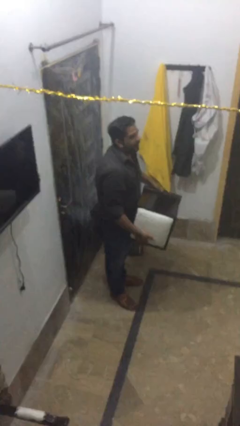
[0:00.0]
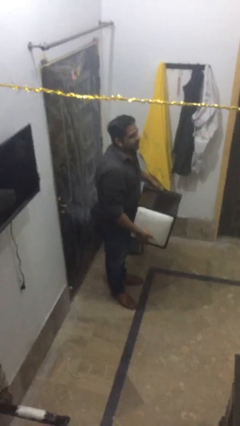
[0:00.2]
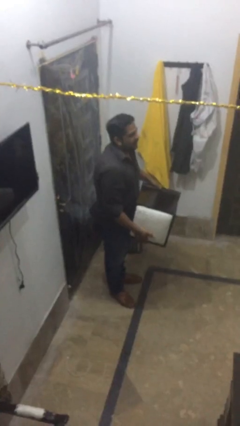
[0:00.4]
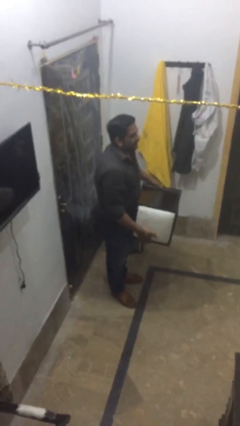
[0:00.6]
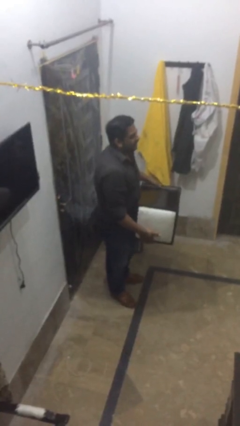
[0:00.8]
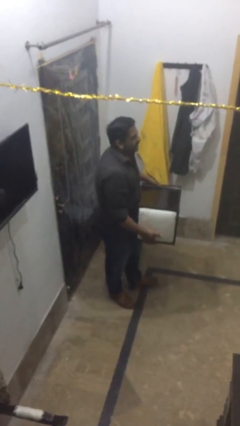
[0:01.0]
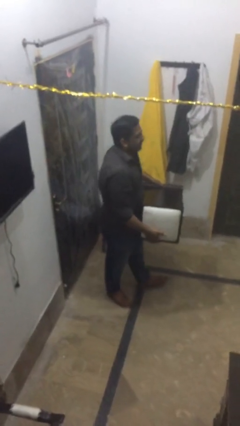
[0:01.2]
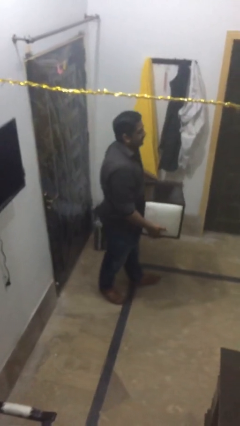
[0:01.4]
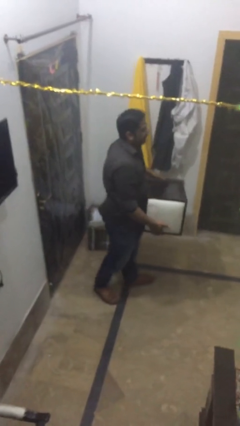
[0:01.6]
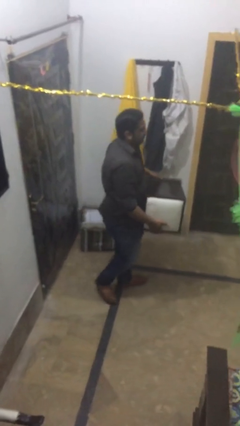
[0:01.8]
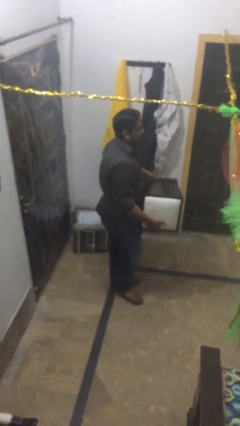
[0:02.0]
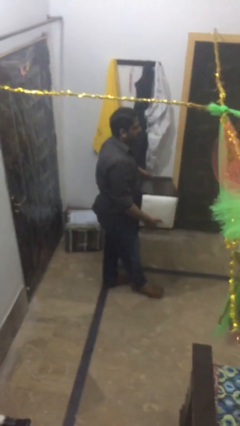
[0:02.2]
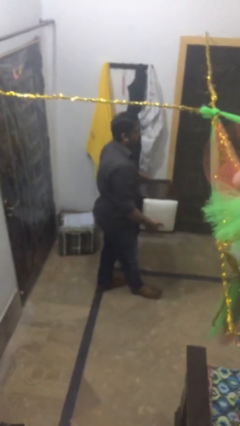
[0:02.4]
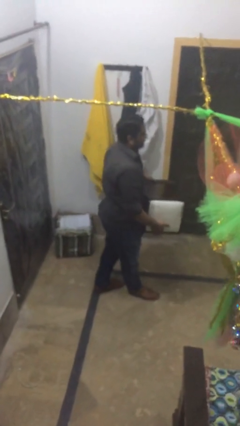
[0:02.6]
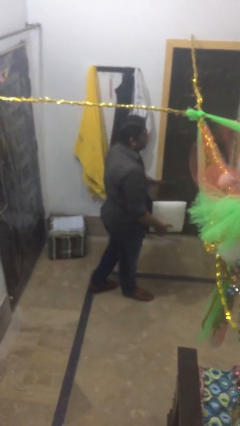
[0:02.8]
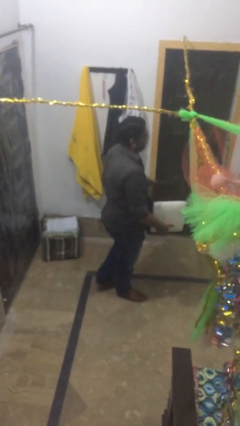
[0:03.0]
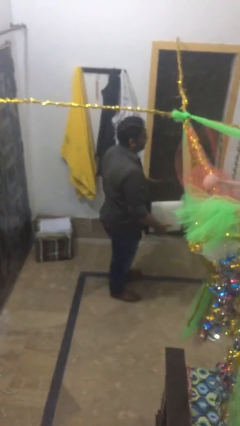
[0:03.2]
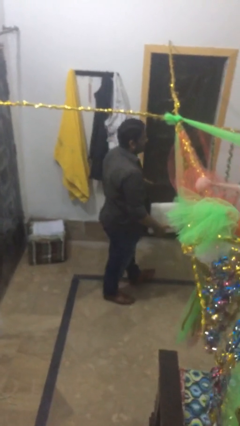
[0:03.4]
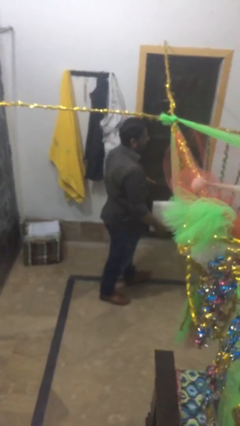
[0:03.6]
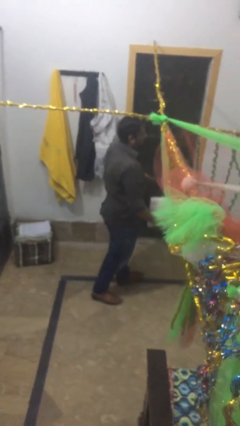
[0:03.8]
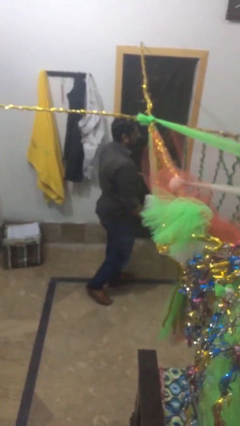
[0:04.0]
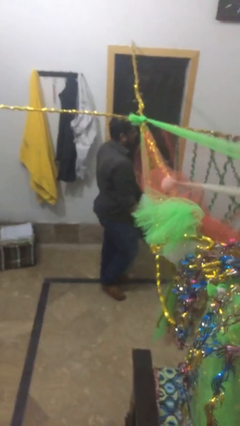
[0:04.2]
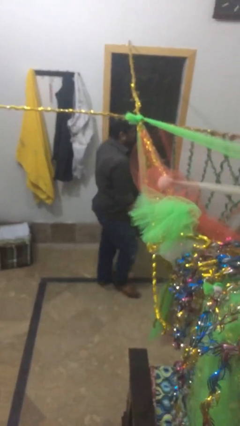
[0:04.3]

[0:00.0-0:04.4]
person carries heavy object

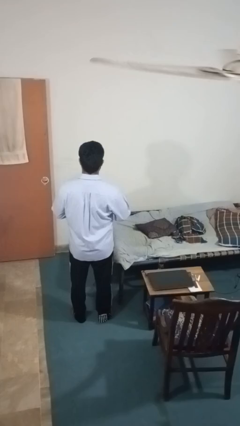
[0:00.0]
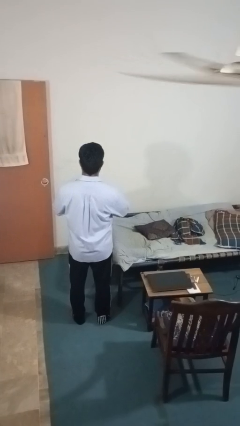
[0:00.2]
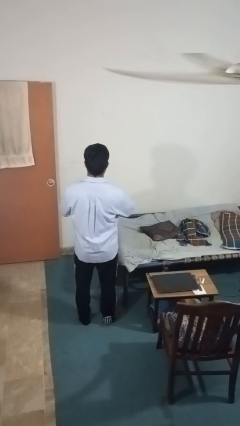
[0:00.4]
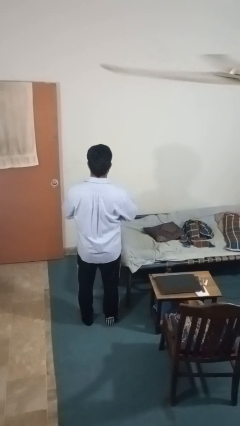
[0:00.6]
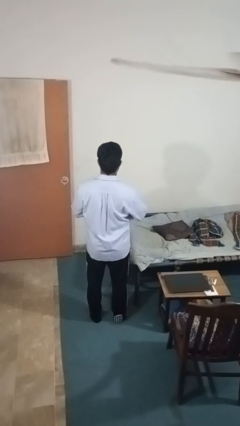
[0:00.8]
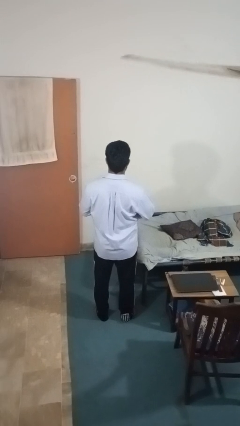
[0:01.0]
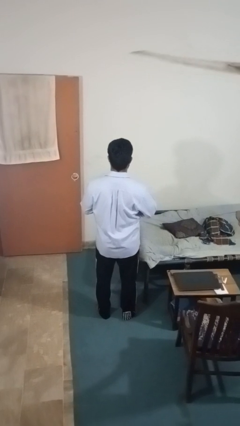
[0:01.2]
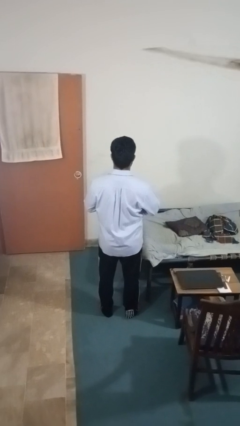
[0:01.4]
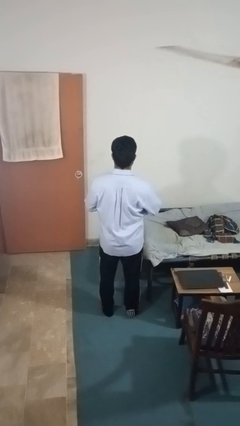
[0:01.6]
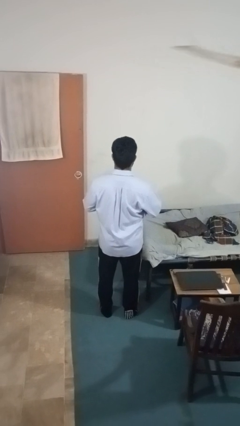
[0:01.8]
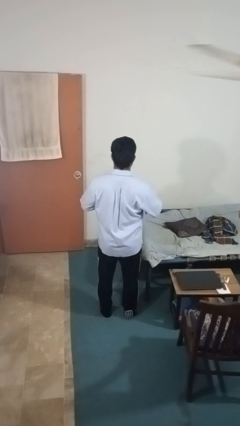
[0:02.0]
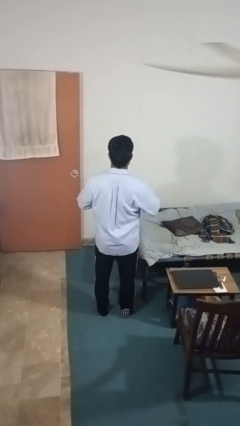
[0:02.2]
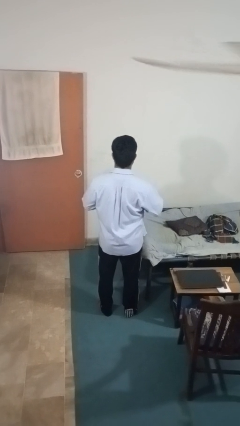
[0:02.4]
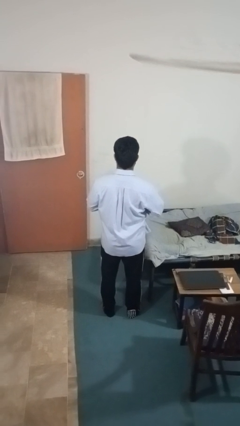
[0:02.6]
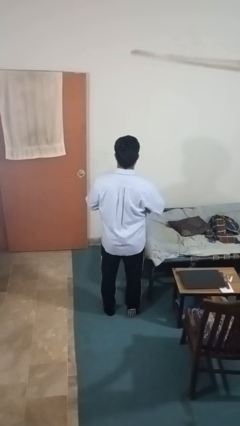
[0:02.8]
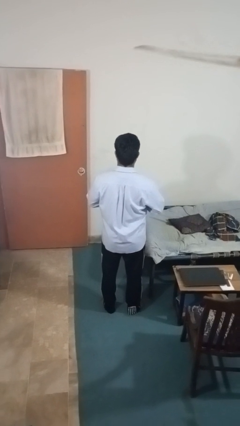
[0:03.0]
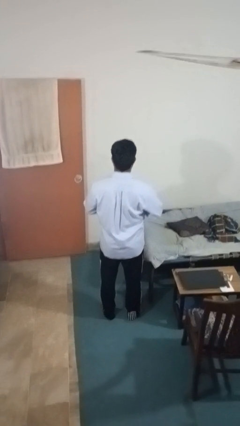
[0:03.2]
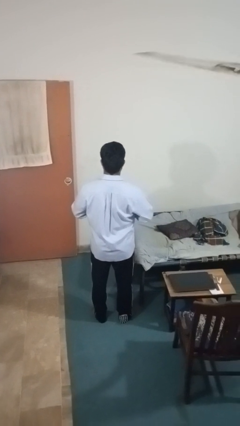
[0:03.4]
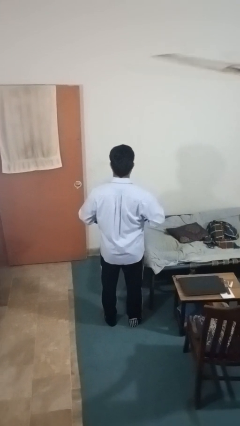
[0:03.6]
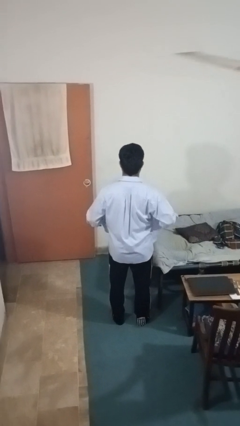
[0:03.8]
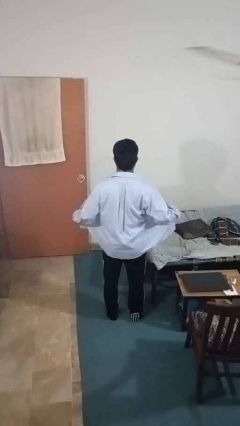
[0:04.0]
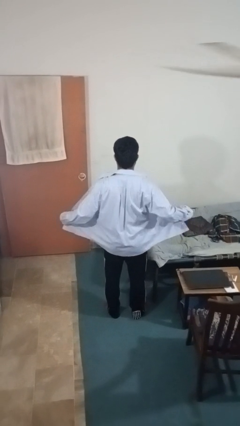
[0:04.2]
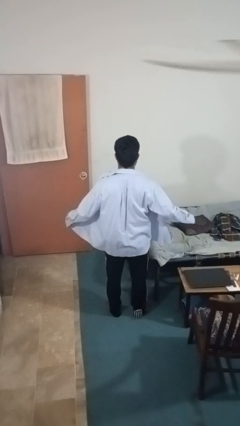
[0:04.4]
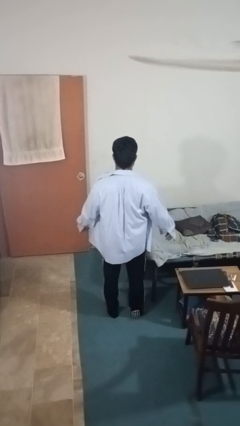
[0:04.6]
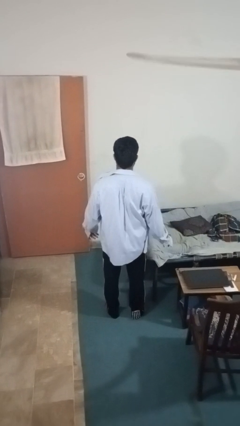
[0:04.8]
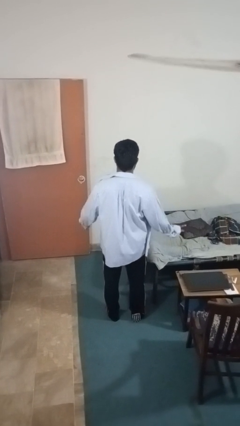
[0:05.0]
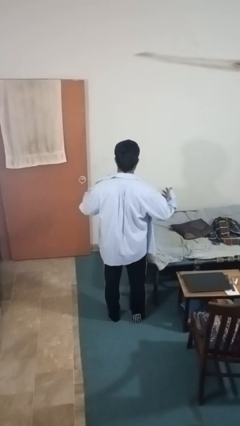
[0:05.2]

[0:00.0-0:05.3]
person unbuttons shirt

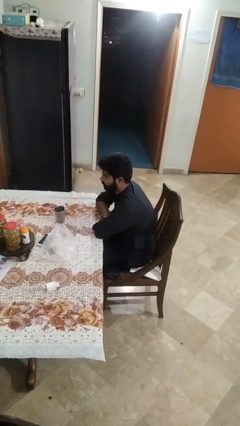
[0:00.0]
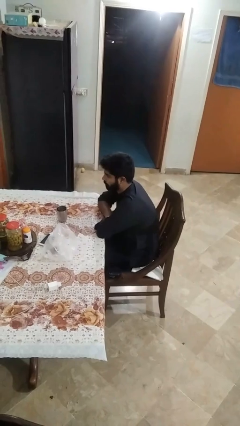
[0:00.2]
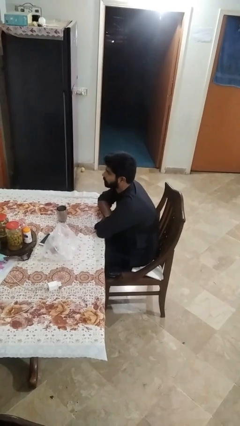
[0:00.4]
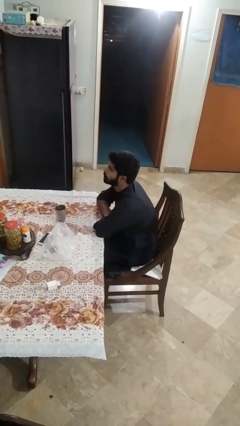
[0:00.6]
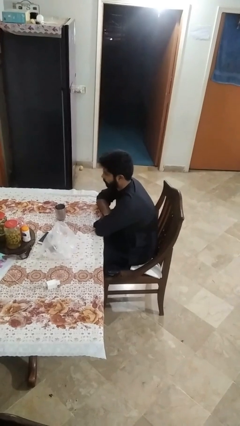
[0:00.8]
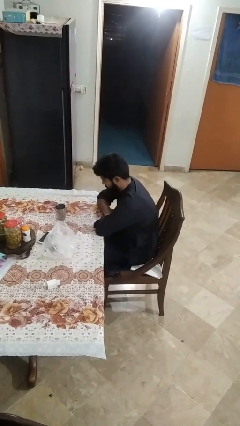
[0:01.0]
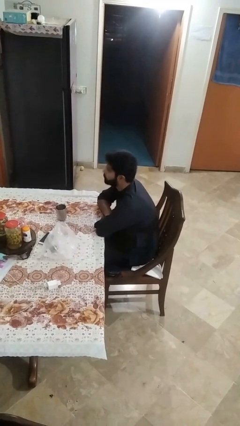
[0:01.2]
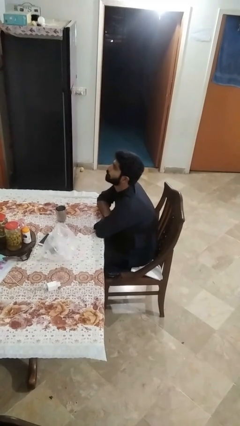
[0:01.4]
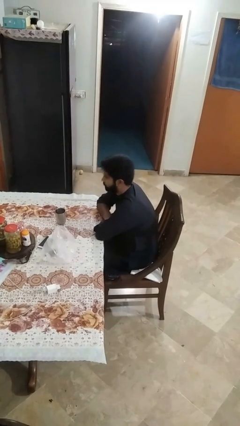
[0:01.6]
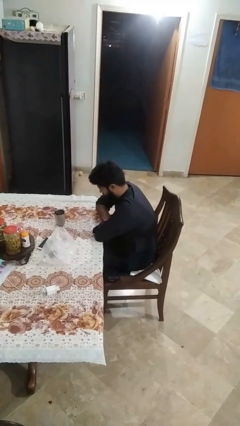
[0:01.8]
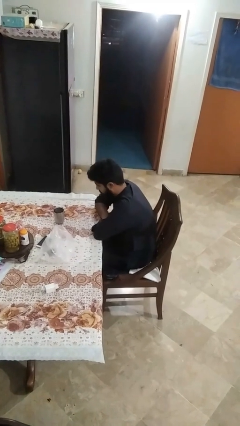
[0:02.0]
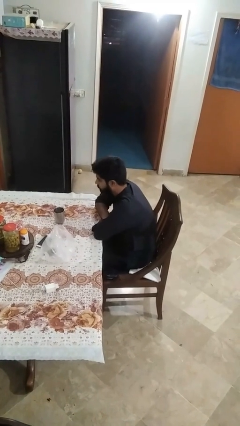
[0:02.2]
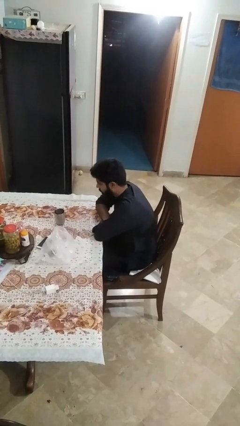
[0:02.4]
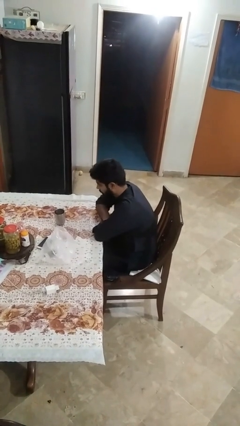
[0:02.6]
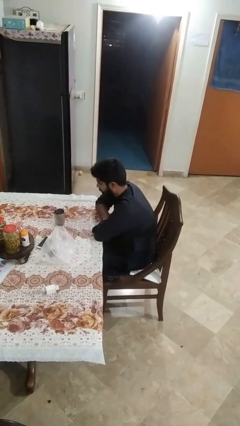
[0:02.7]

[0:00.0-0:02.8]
person nods head

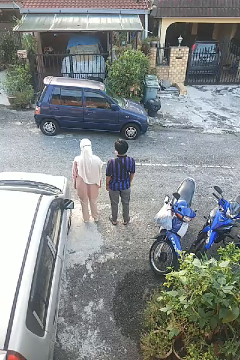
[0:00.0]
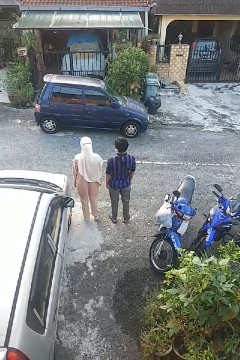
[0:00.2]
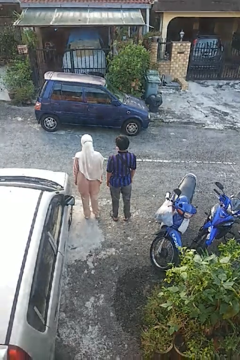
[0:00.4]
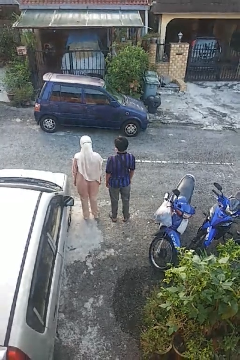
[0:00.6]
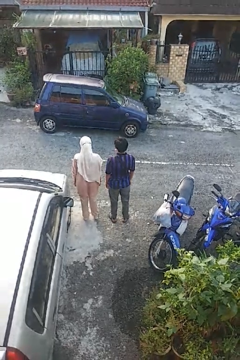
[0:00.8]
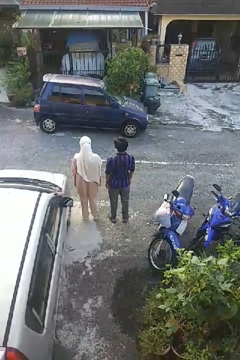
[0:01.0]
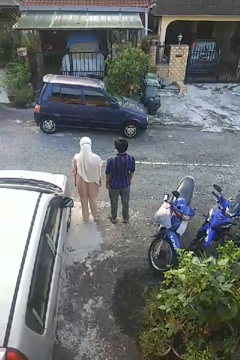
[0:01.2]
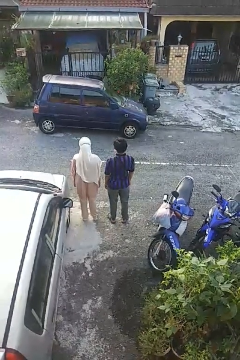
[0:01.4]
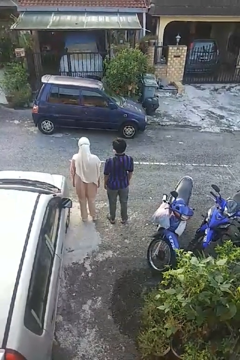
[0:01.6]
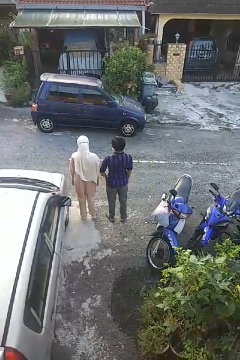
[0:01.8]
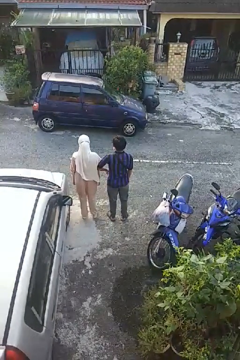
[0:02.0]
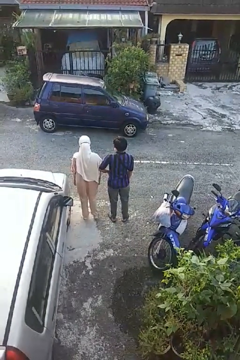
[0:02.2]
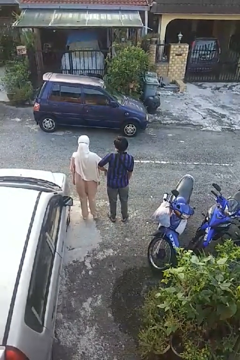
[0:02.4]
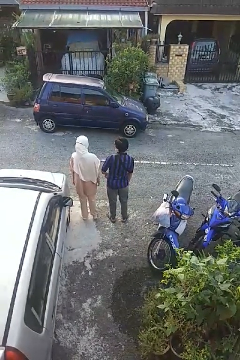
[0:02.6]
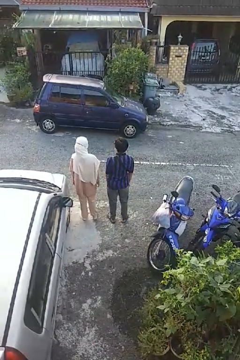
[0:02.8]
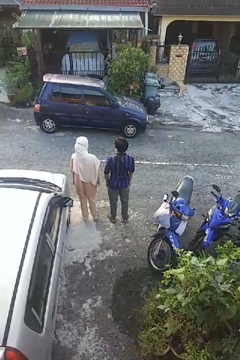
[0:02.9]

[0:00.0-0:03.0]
person nudges person with elbow

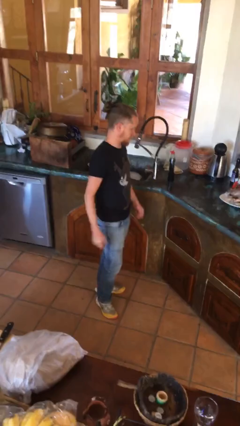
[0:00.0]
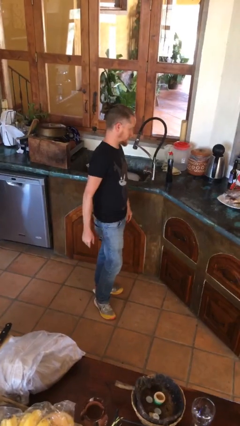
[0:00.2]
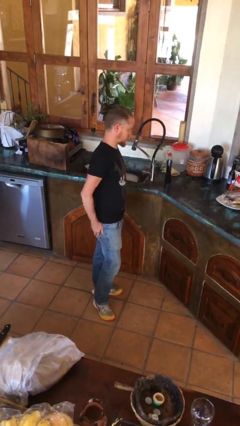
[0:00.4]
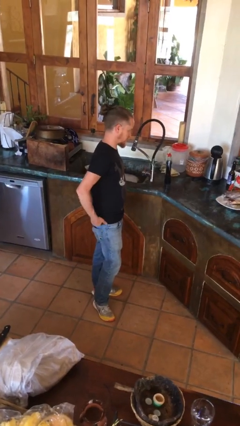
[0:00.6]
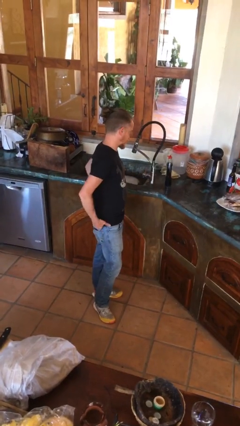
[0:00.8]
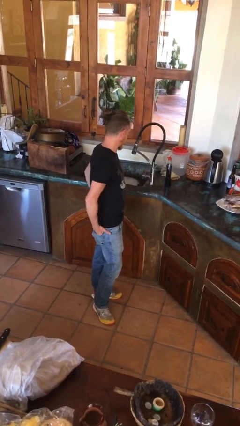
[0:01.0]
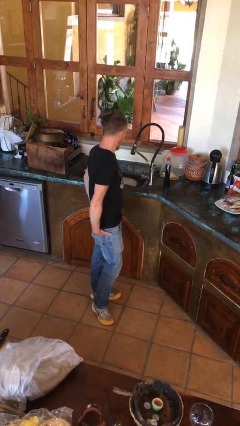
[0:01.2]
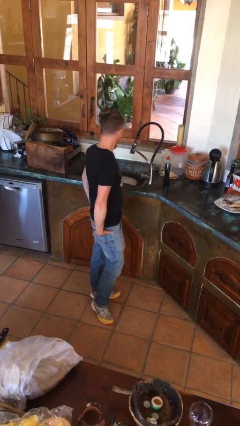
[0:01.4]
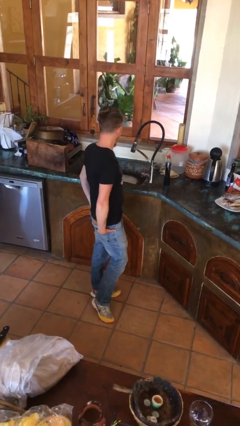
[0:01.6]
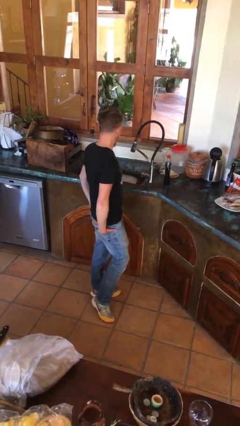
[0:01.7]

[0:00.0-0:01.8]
person puts hands in back pockets

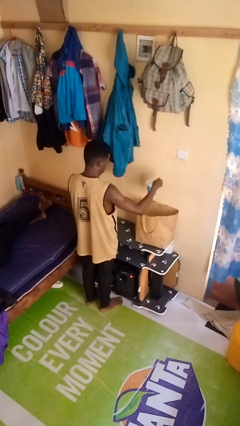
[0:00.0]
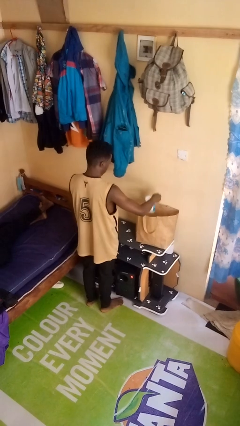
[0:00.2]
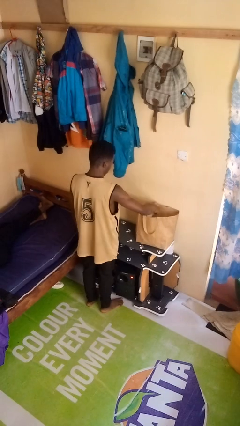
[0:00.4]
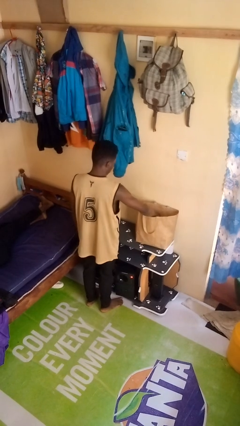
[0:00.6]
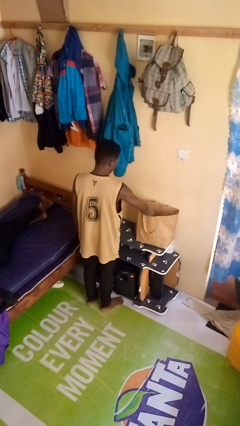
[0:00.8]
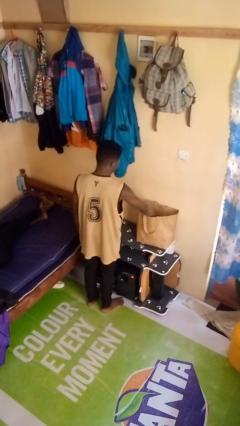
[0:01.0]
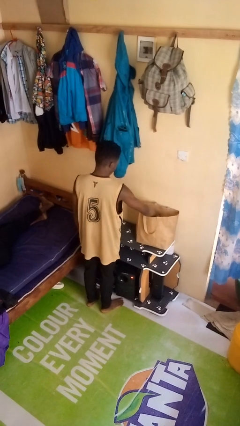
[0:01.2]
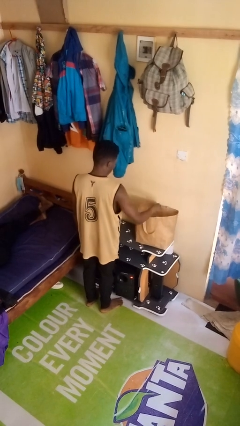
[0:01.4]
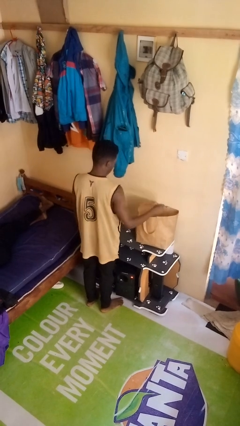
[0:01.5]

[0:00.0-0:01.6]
person puts object into bag
